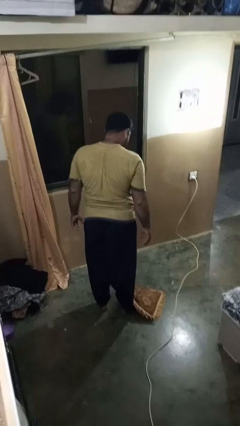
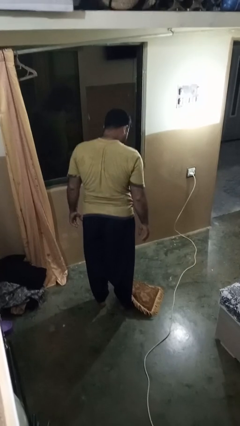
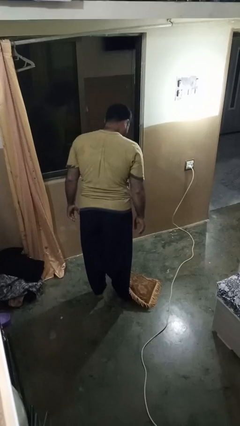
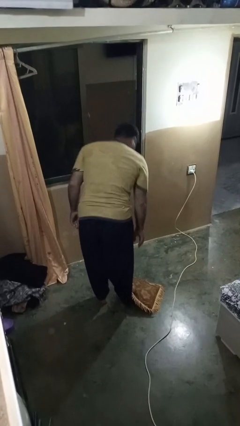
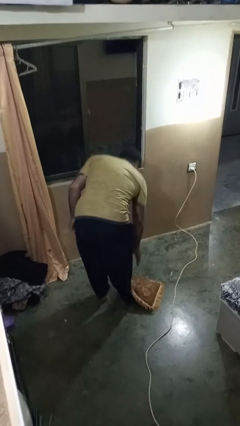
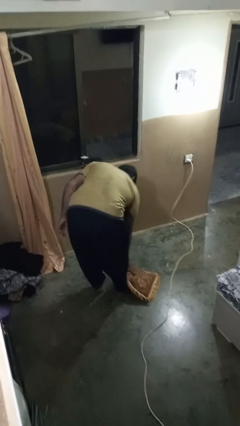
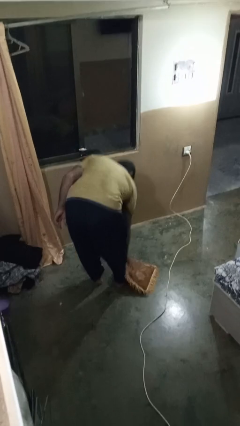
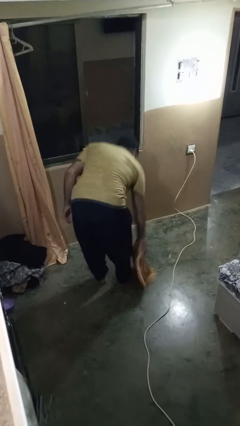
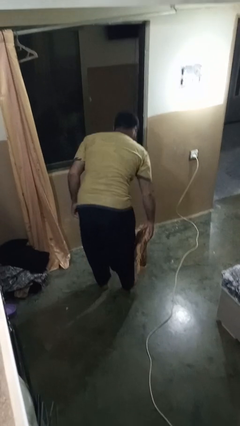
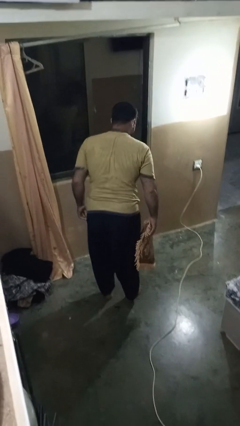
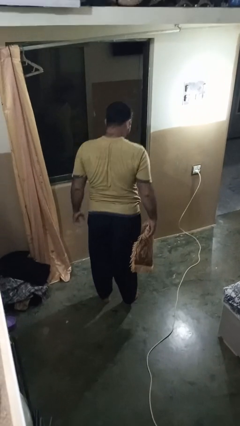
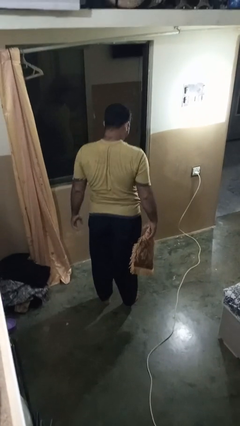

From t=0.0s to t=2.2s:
person picks up object from floor

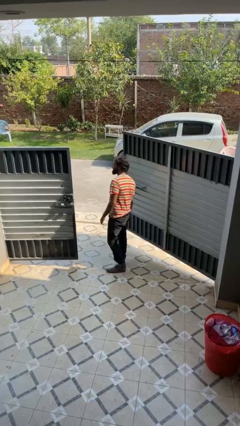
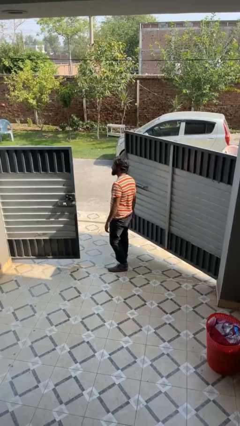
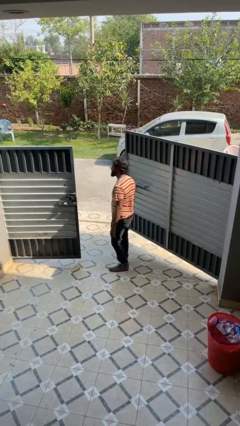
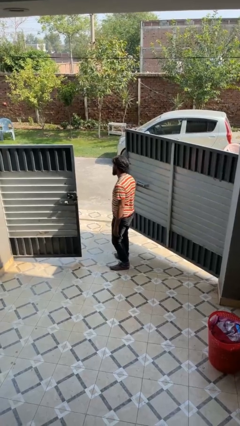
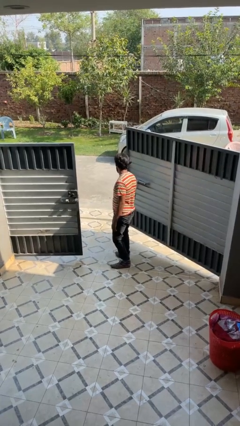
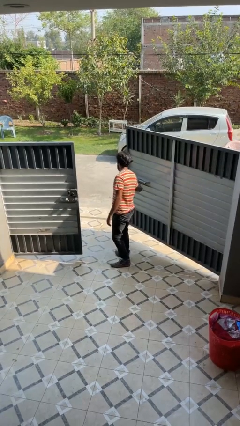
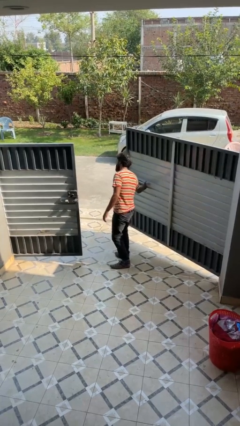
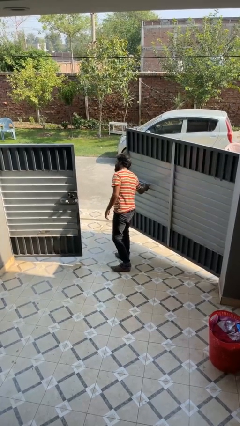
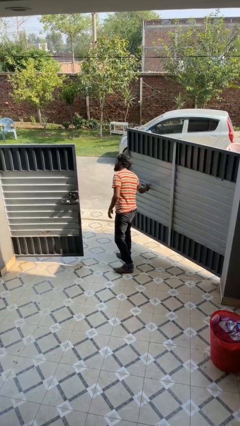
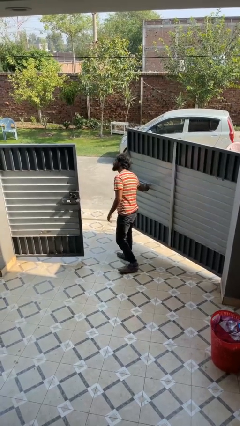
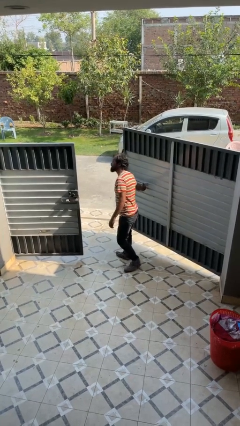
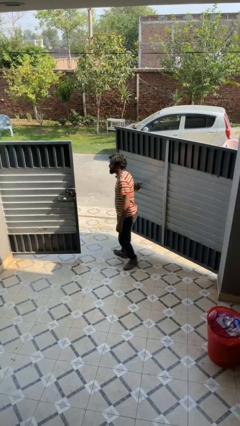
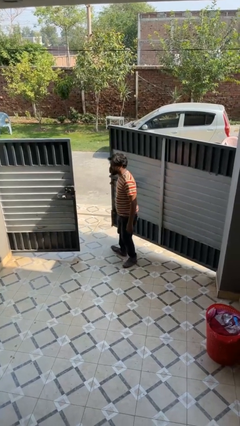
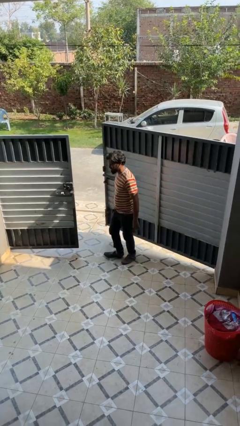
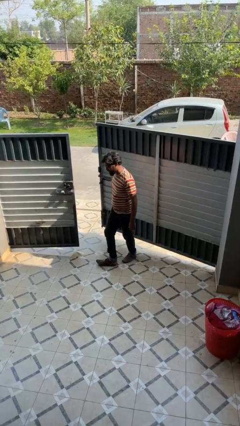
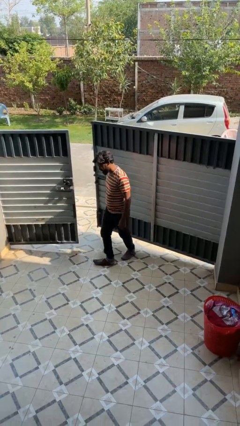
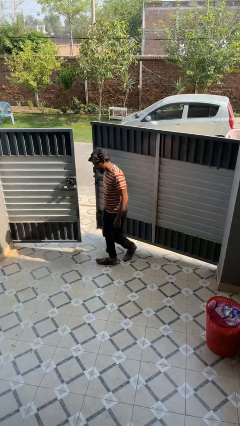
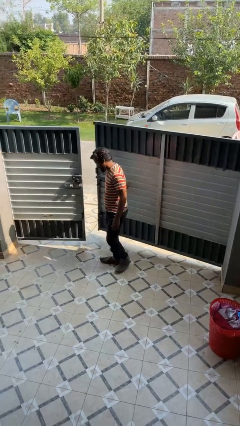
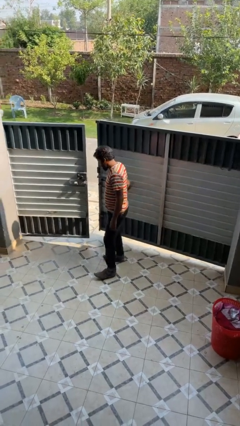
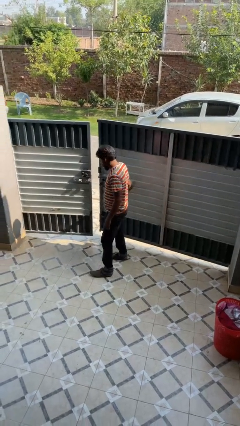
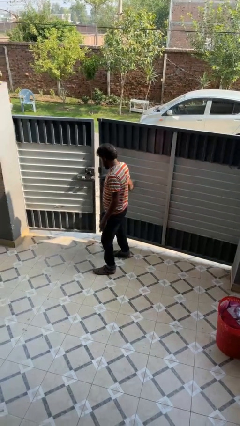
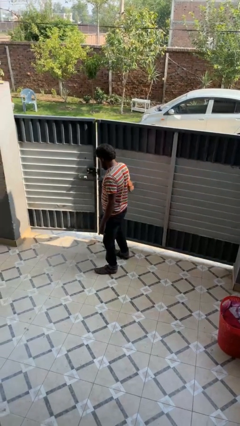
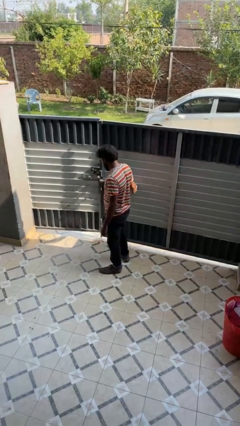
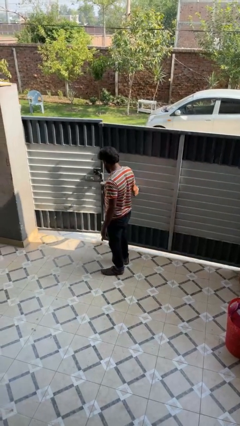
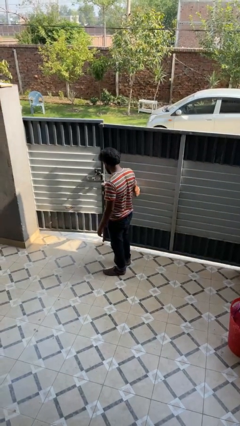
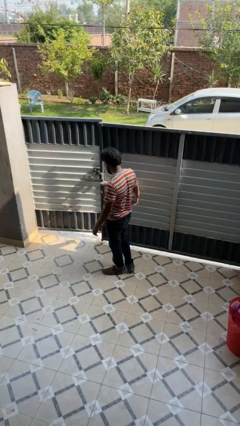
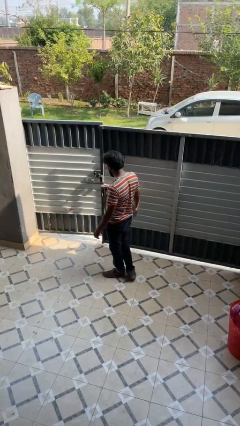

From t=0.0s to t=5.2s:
person closes gate

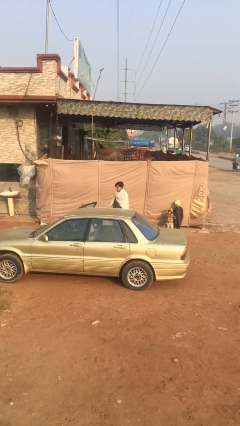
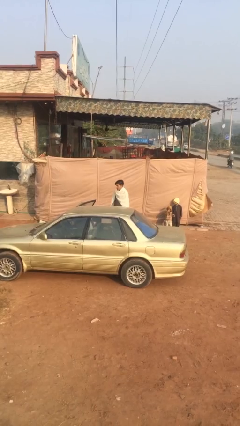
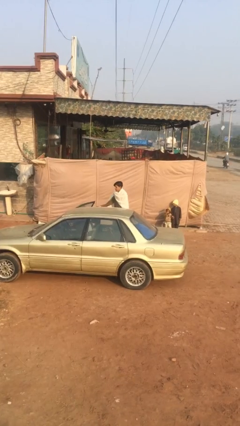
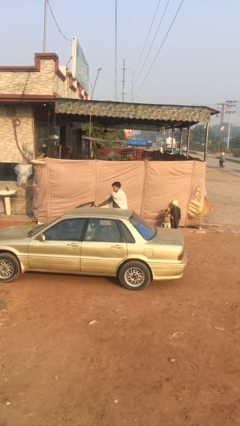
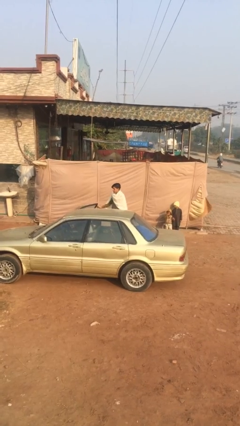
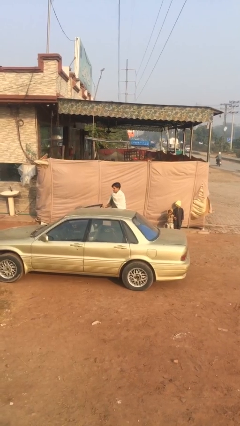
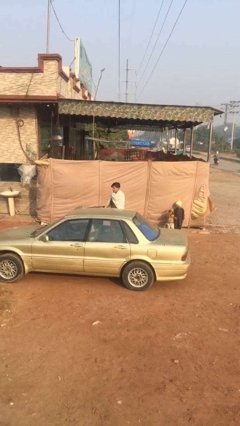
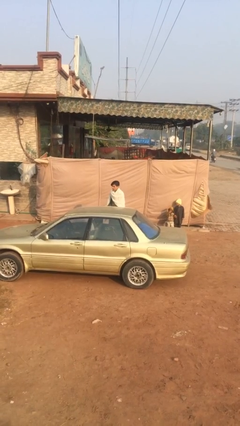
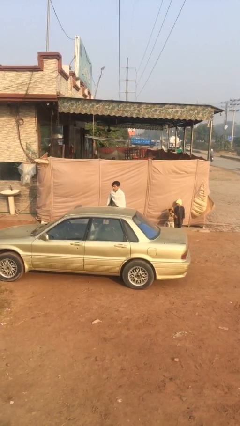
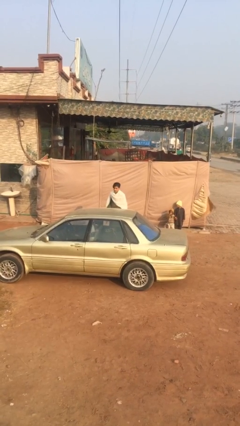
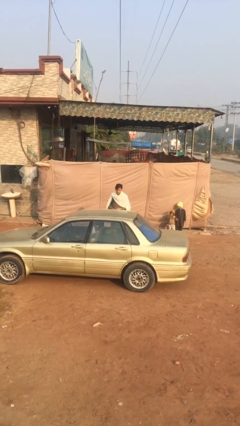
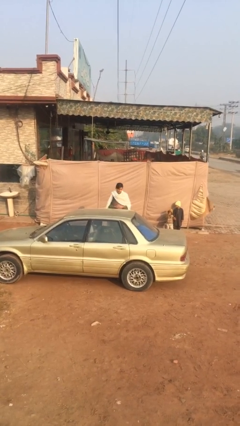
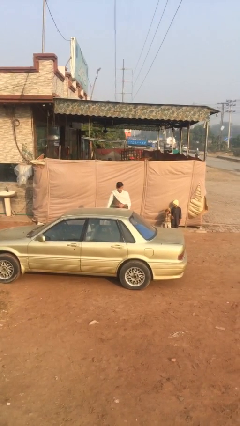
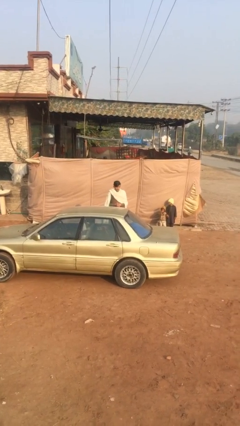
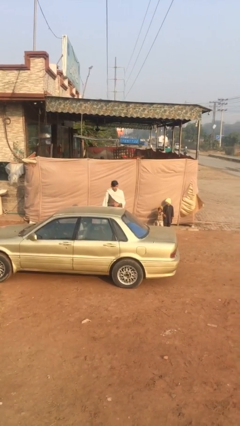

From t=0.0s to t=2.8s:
person closes car door

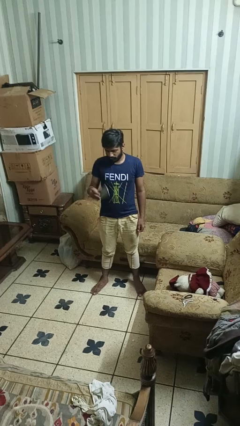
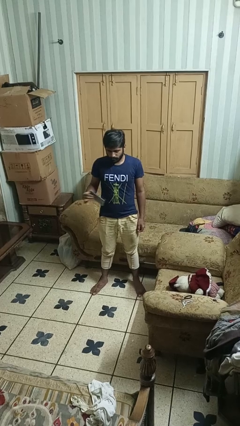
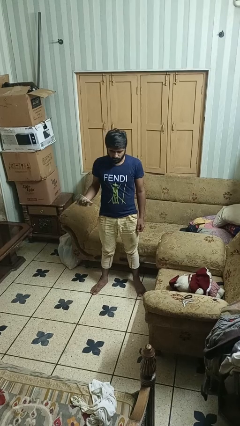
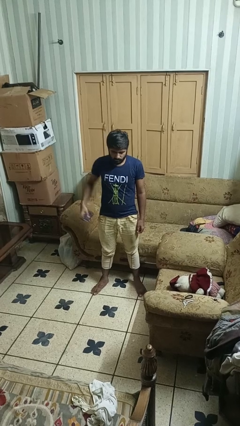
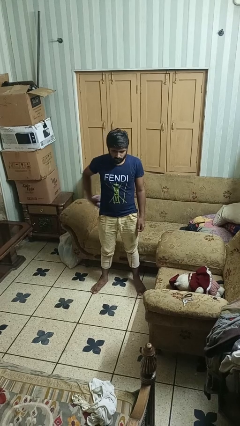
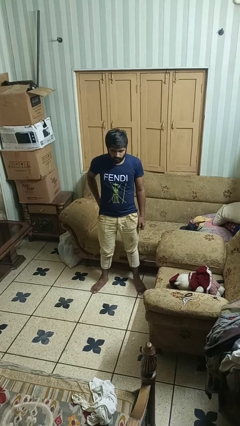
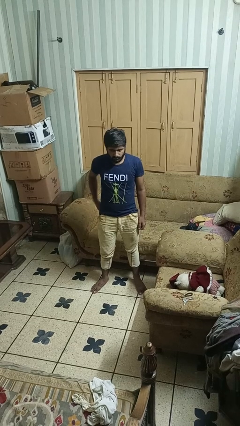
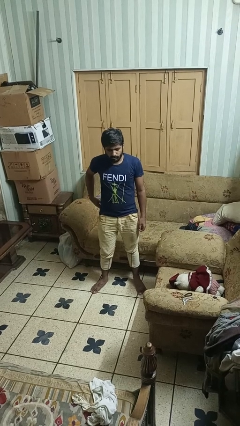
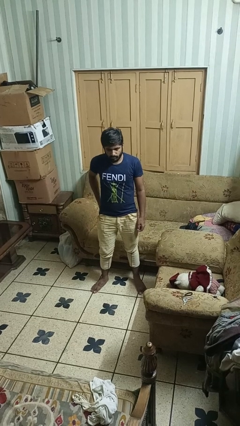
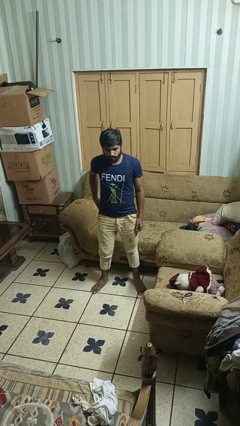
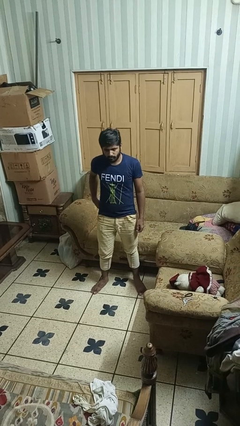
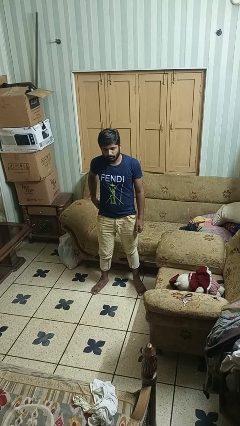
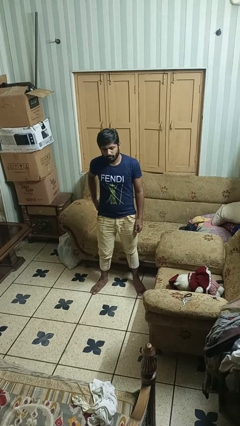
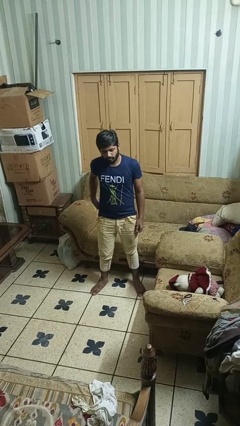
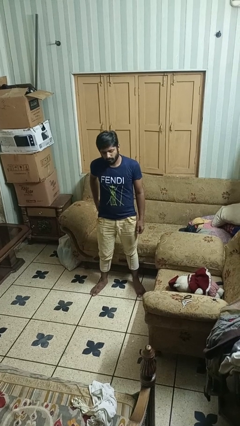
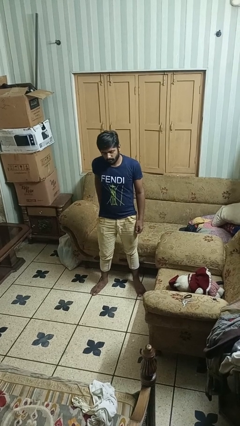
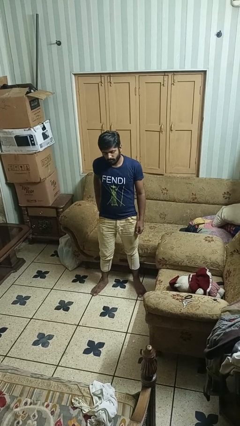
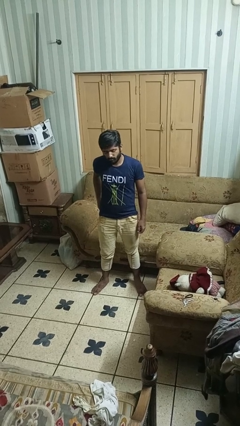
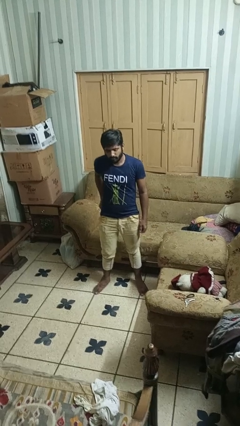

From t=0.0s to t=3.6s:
person puts phone into pocket

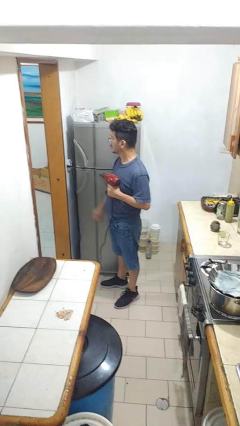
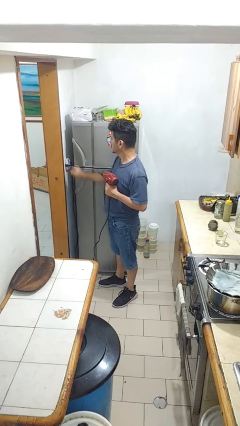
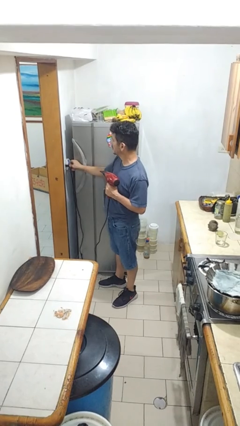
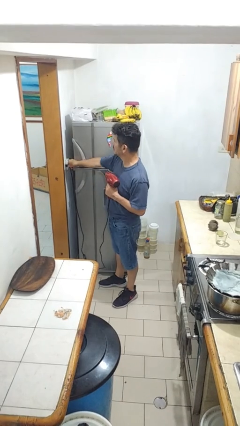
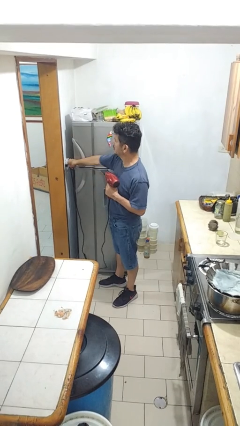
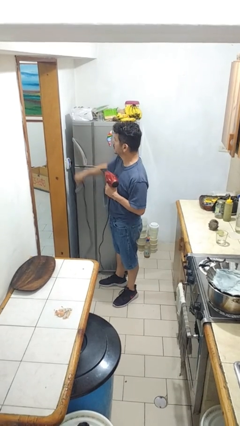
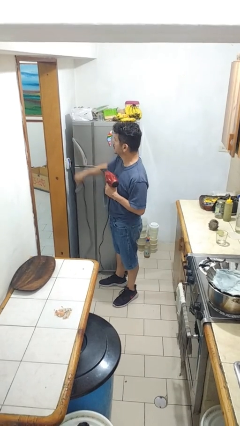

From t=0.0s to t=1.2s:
person unplugs from electrical socket

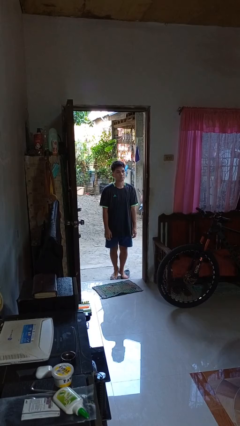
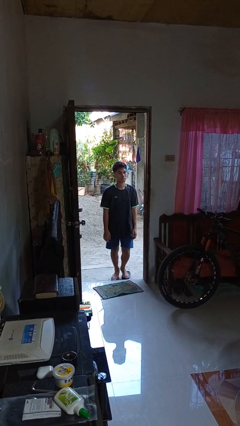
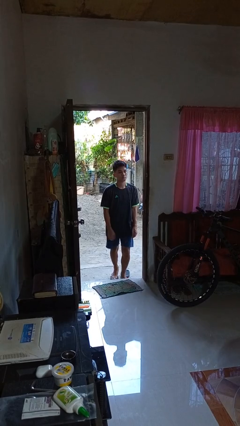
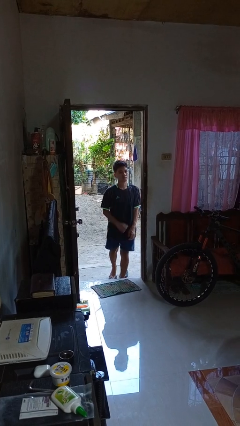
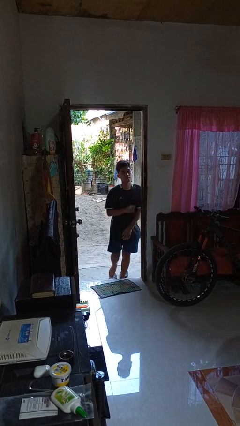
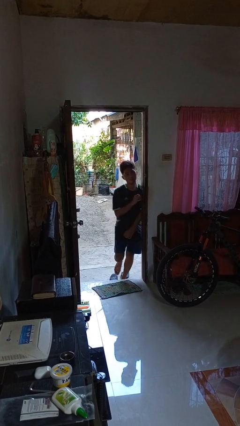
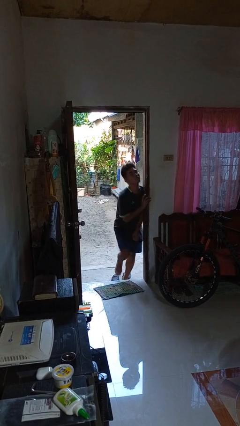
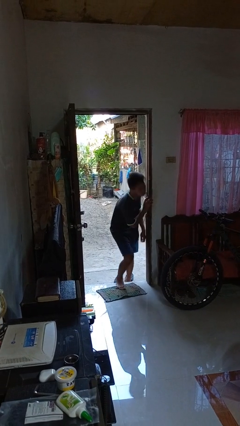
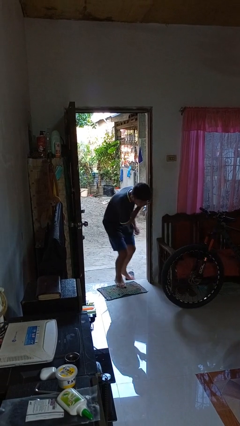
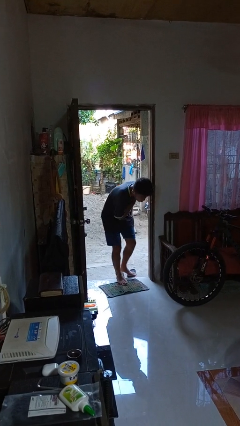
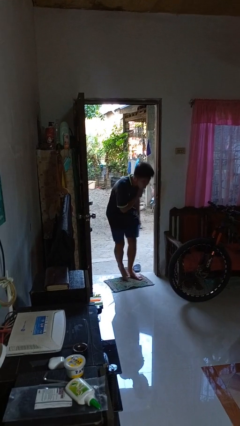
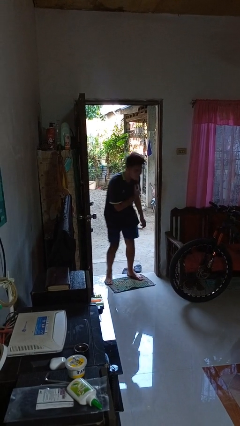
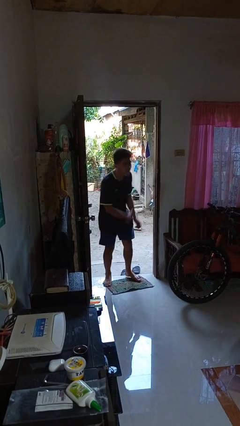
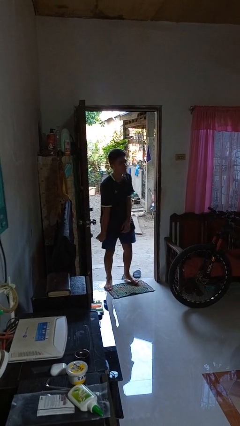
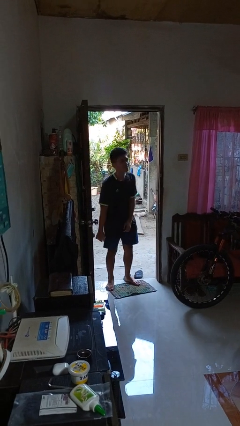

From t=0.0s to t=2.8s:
person bumps into wall
